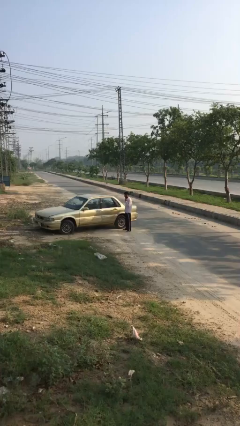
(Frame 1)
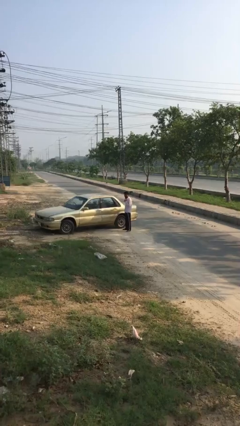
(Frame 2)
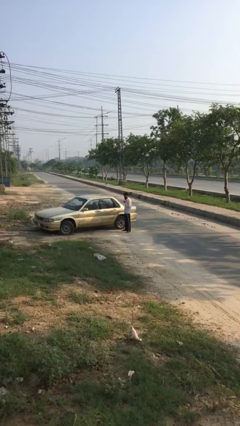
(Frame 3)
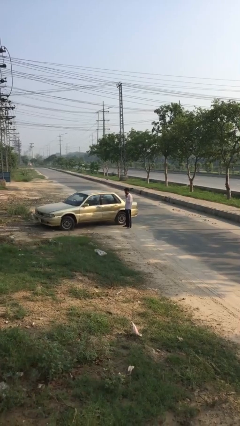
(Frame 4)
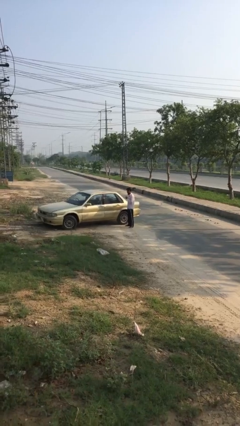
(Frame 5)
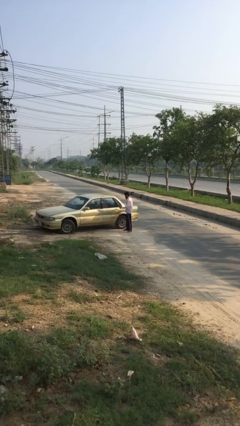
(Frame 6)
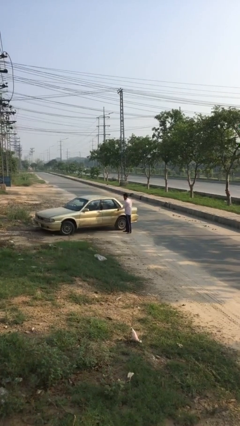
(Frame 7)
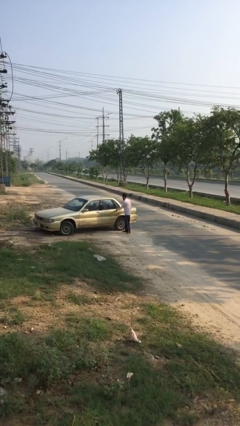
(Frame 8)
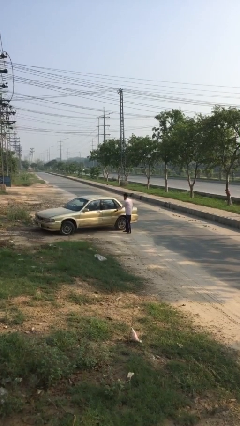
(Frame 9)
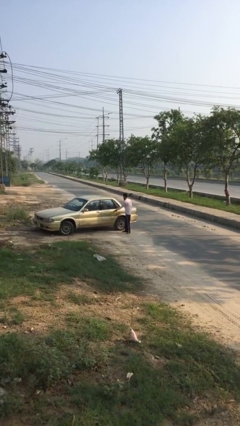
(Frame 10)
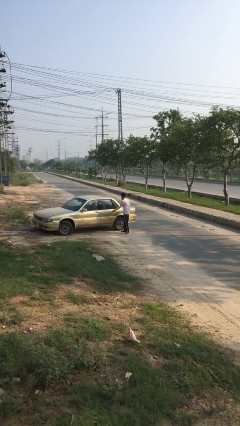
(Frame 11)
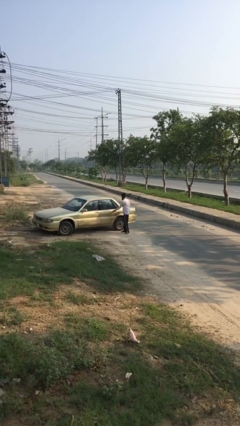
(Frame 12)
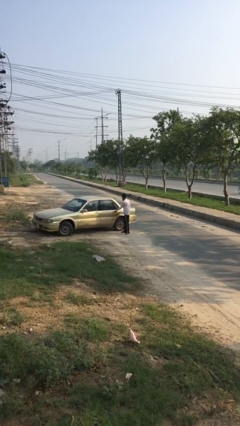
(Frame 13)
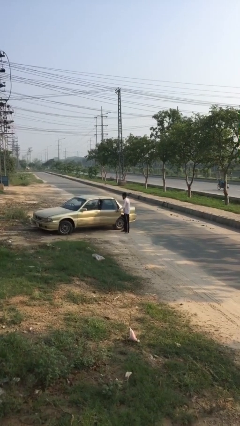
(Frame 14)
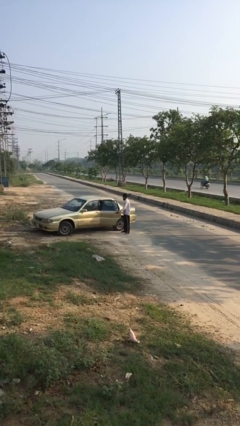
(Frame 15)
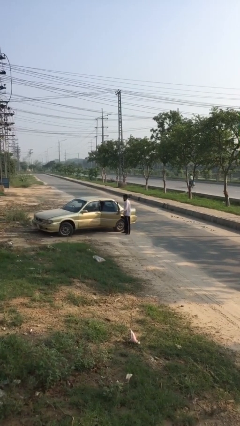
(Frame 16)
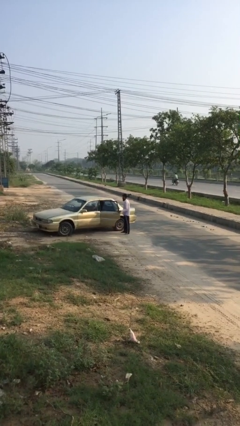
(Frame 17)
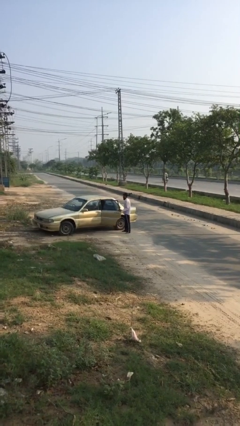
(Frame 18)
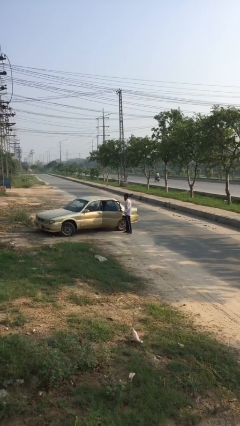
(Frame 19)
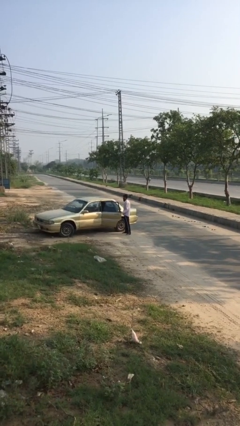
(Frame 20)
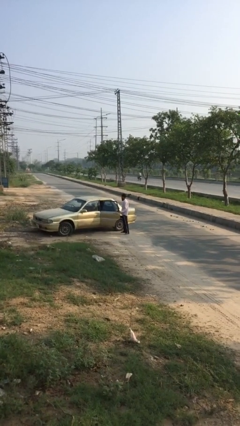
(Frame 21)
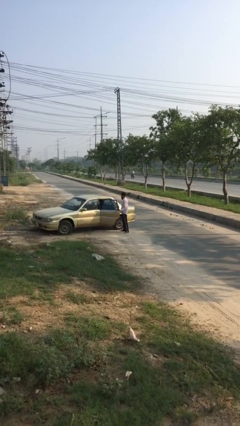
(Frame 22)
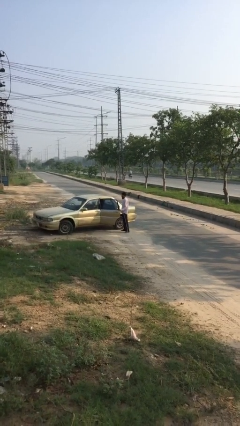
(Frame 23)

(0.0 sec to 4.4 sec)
person opens car door

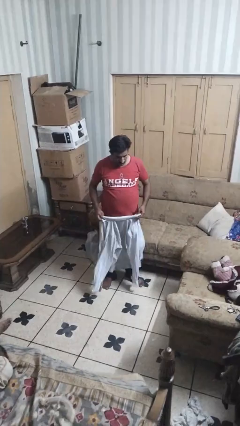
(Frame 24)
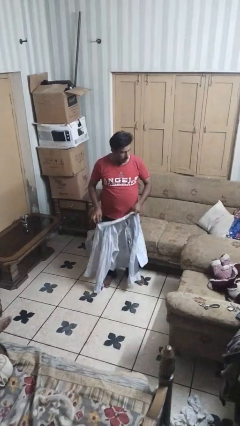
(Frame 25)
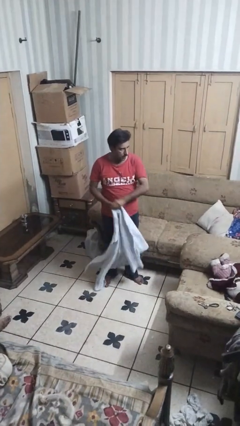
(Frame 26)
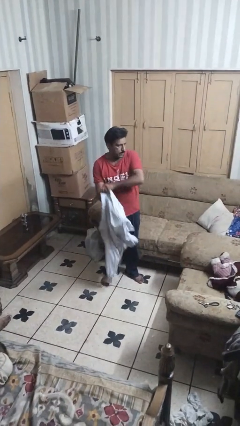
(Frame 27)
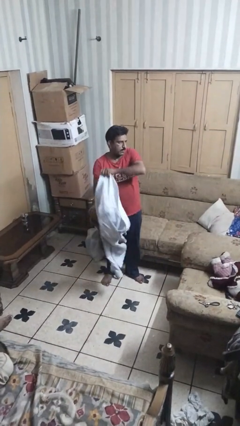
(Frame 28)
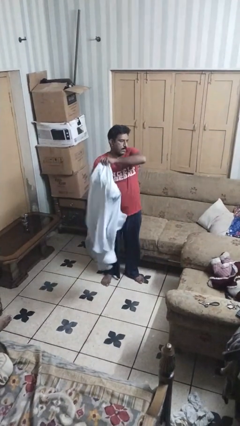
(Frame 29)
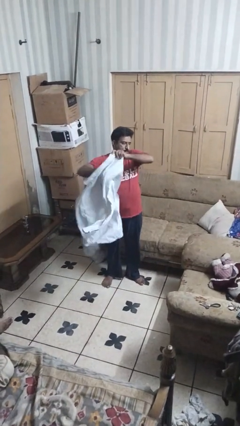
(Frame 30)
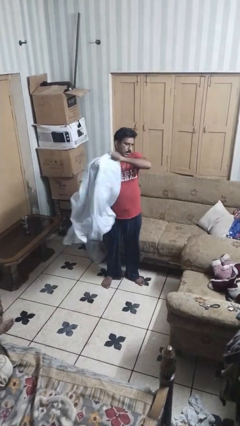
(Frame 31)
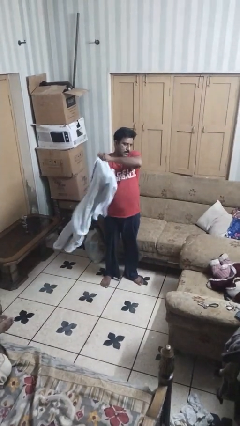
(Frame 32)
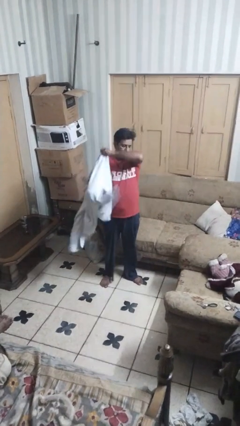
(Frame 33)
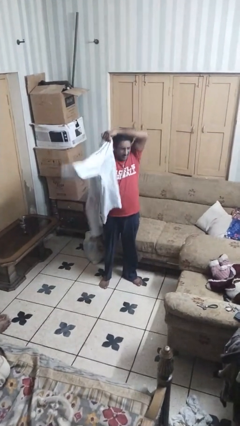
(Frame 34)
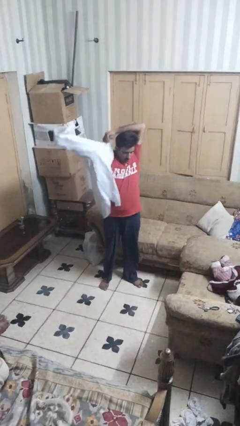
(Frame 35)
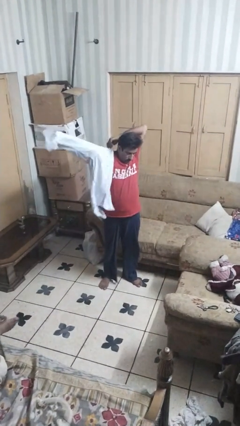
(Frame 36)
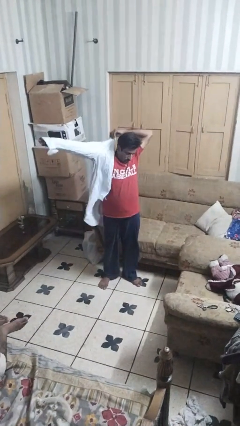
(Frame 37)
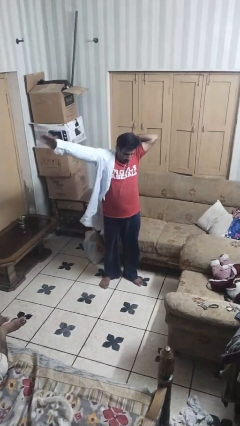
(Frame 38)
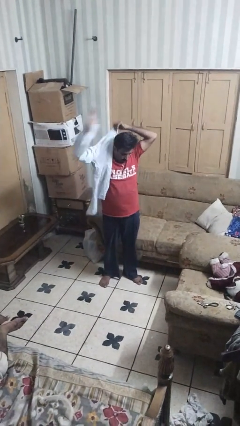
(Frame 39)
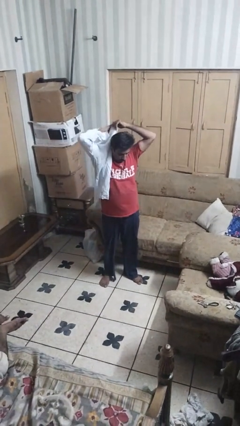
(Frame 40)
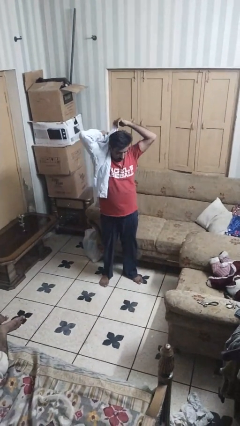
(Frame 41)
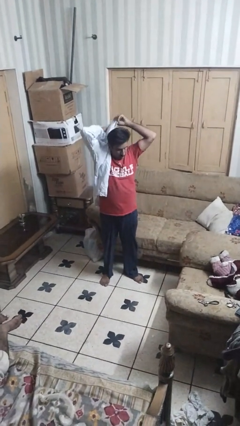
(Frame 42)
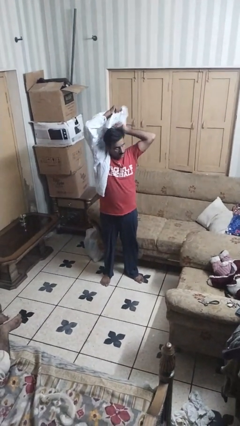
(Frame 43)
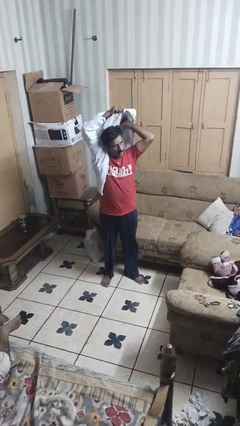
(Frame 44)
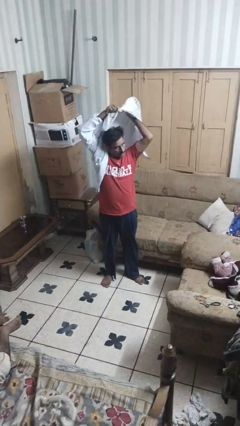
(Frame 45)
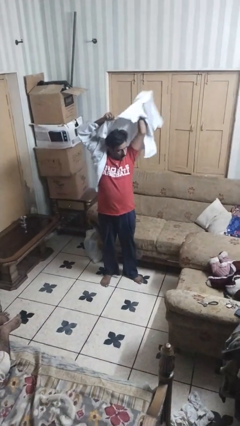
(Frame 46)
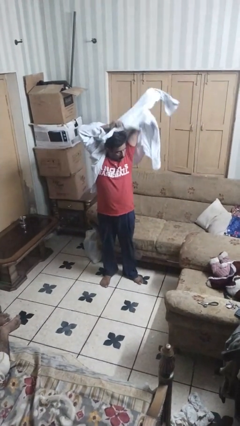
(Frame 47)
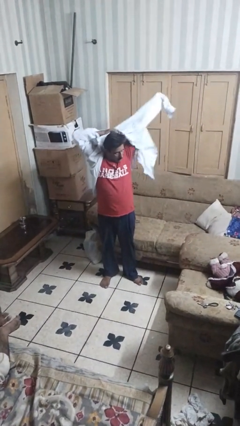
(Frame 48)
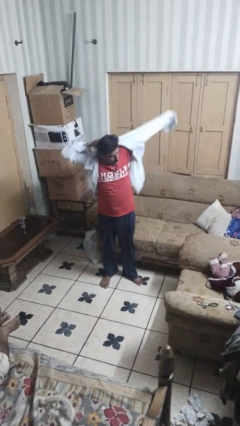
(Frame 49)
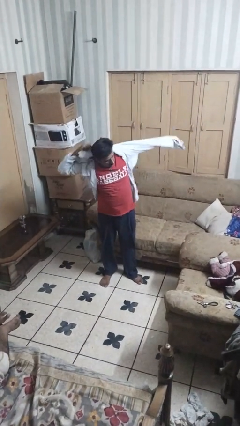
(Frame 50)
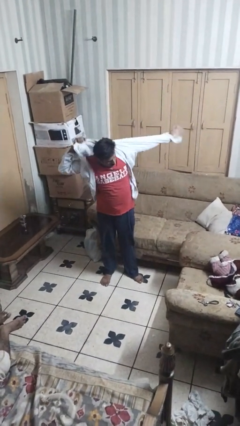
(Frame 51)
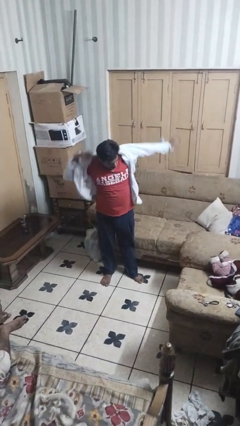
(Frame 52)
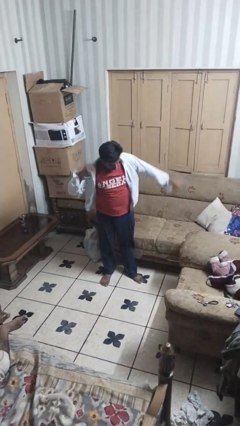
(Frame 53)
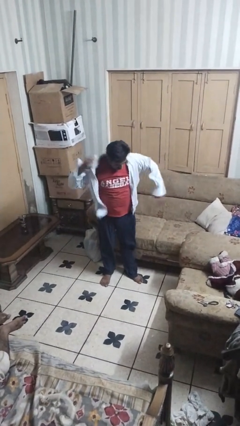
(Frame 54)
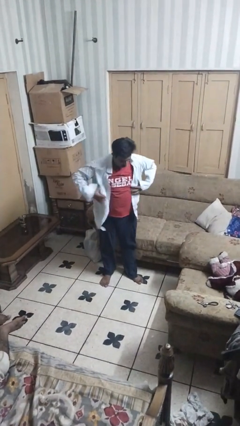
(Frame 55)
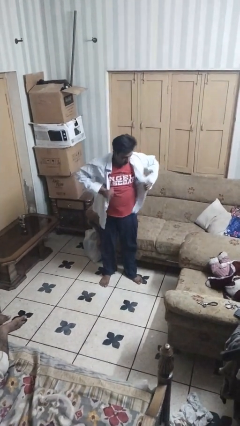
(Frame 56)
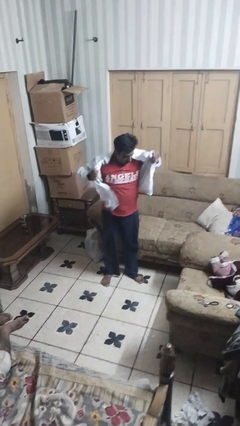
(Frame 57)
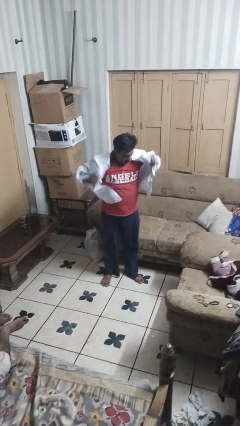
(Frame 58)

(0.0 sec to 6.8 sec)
person puts on shirt

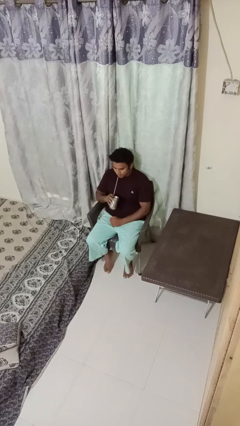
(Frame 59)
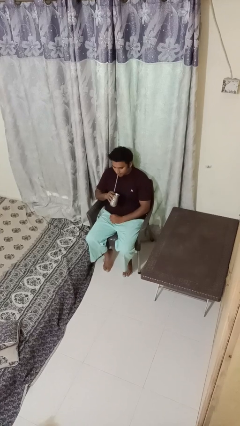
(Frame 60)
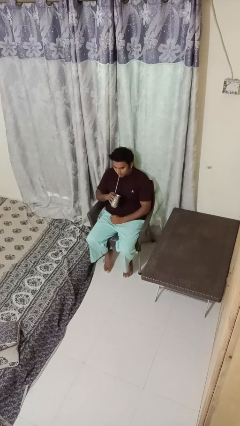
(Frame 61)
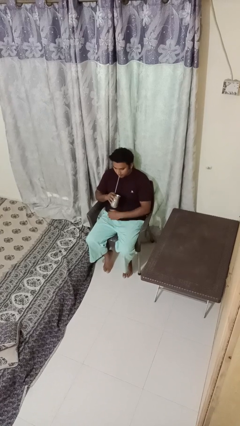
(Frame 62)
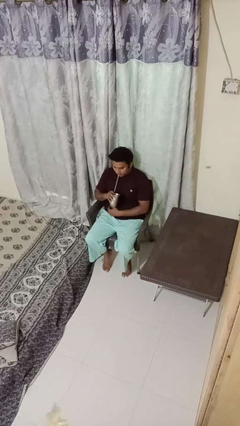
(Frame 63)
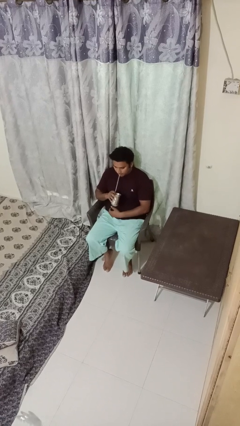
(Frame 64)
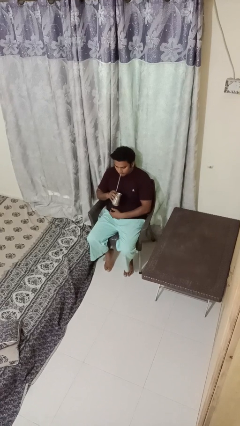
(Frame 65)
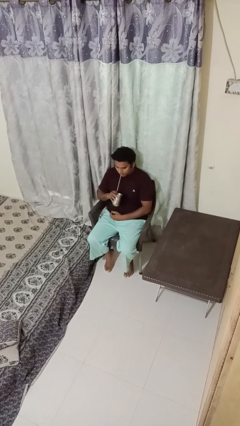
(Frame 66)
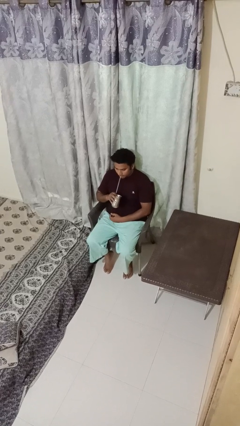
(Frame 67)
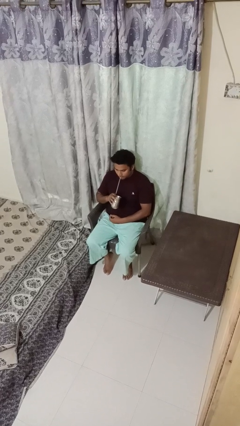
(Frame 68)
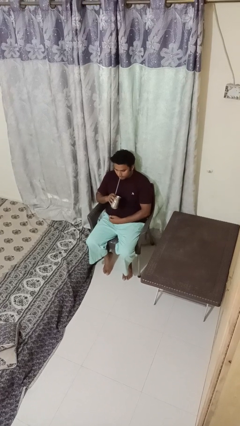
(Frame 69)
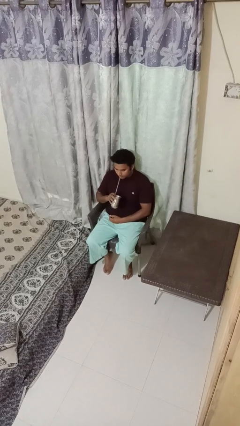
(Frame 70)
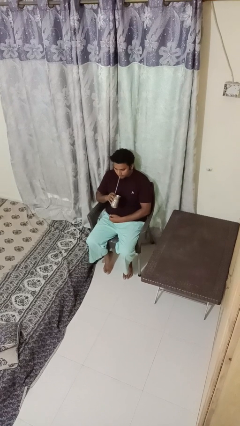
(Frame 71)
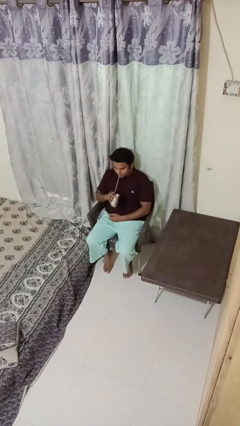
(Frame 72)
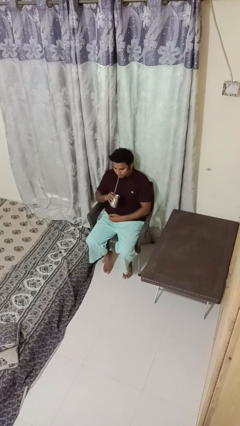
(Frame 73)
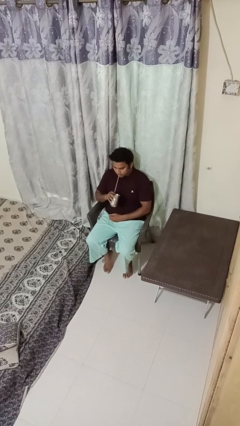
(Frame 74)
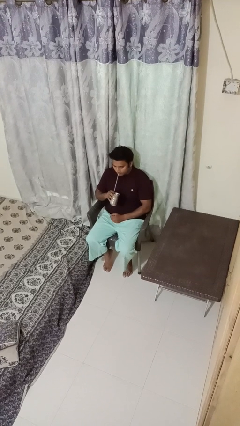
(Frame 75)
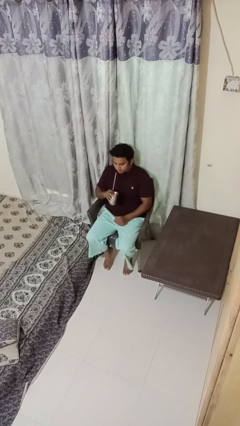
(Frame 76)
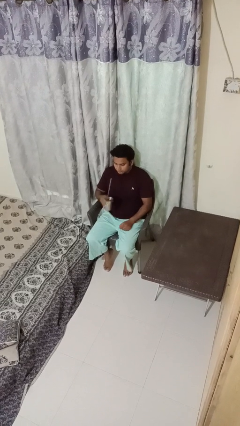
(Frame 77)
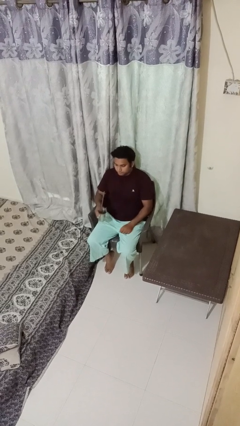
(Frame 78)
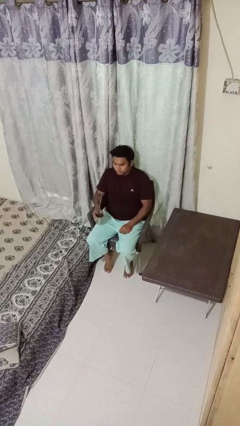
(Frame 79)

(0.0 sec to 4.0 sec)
person drinks from straw

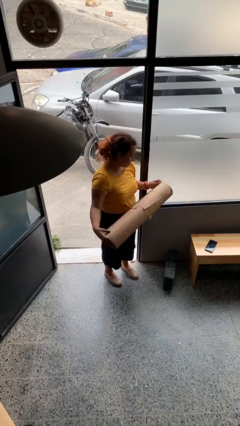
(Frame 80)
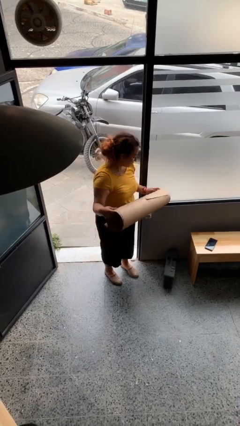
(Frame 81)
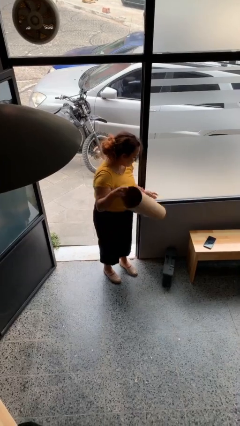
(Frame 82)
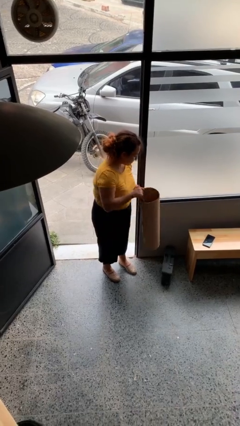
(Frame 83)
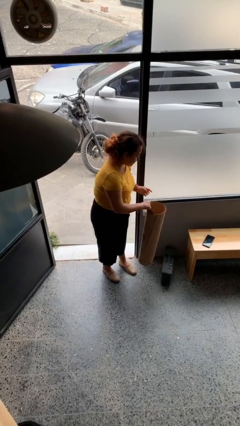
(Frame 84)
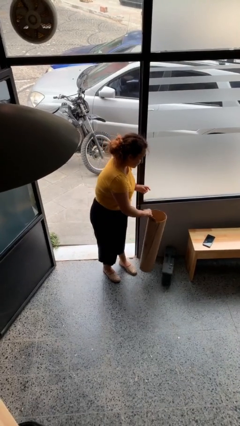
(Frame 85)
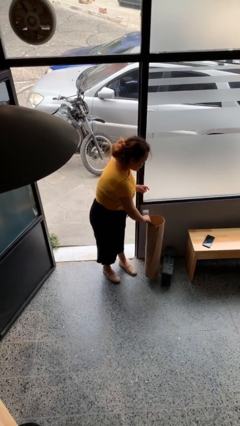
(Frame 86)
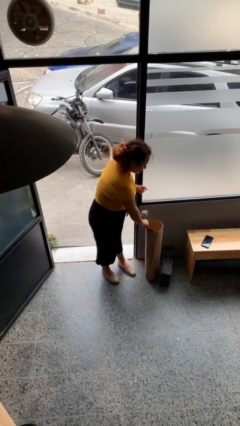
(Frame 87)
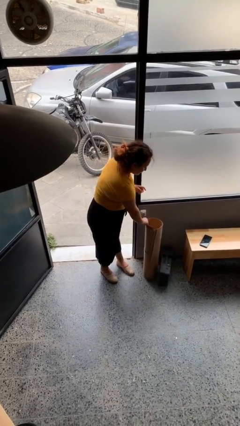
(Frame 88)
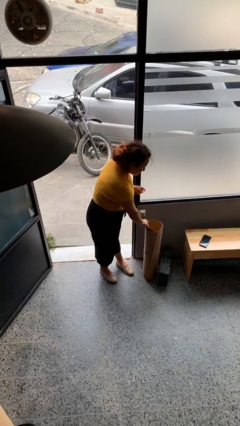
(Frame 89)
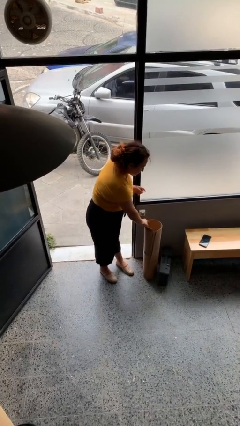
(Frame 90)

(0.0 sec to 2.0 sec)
person puts down object on floor

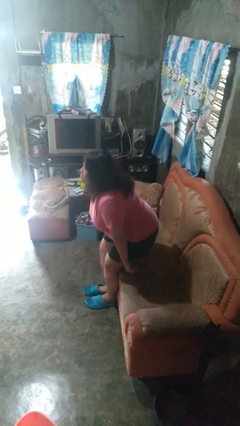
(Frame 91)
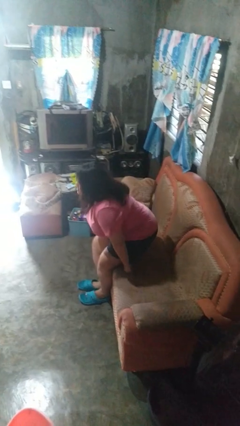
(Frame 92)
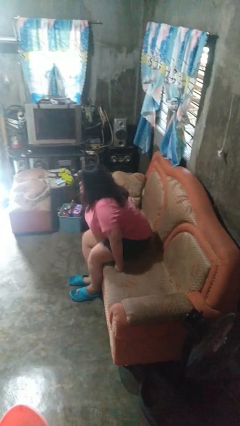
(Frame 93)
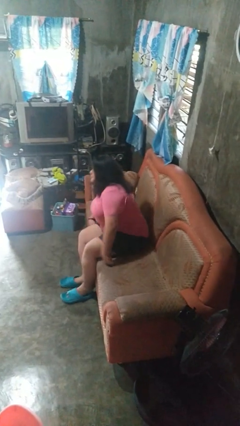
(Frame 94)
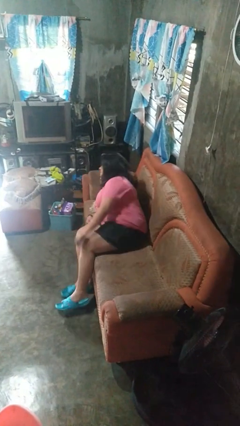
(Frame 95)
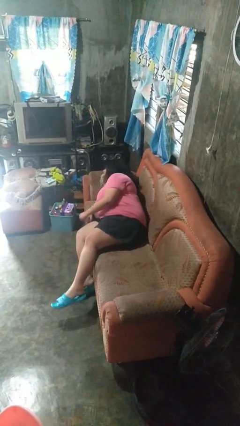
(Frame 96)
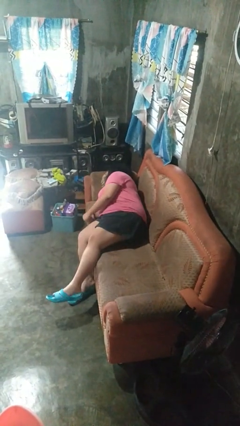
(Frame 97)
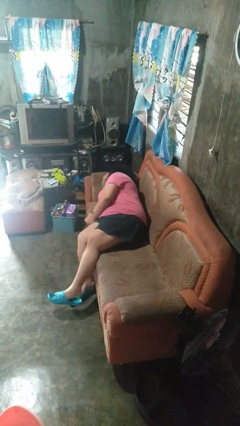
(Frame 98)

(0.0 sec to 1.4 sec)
person lies down on couch
